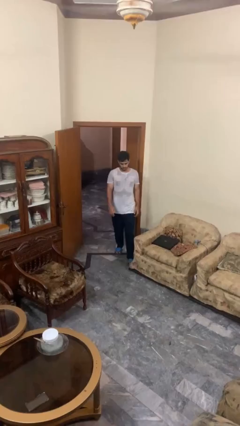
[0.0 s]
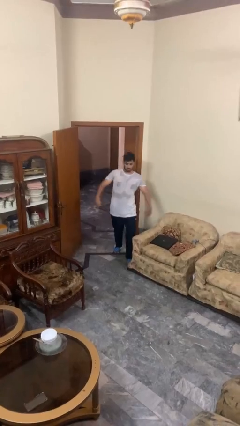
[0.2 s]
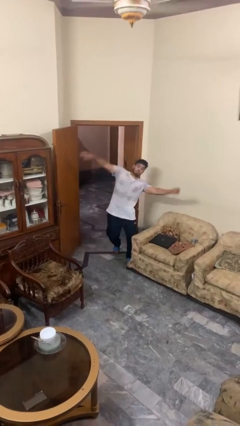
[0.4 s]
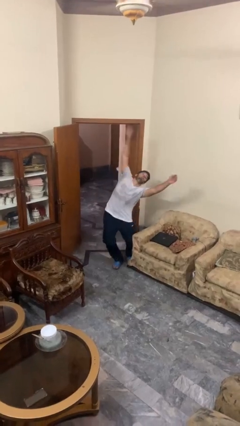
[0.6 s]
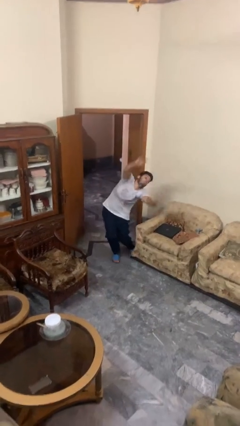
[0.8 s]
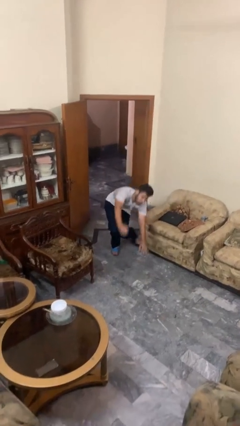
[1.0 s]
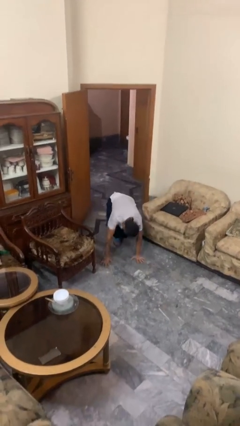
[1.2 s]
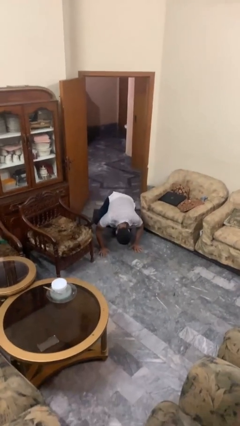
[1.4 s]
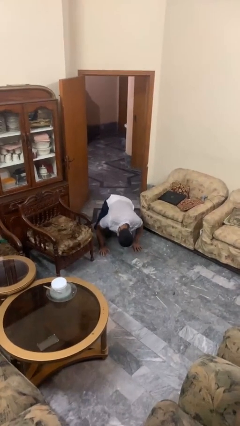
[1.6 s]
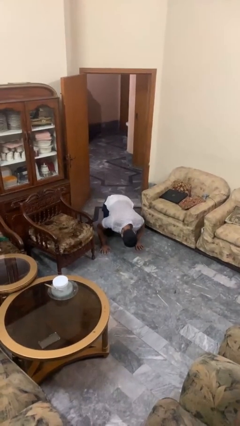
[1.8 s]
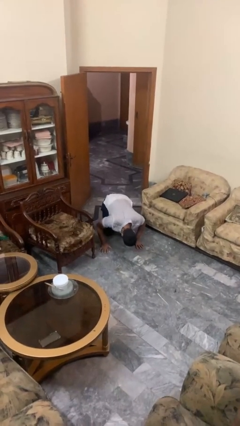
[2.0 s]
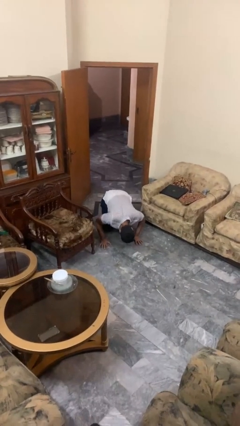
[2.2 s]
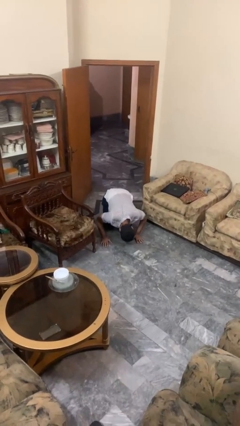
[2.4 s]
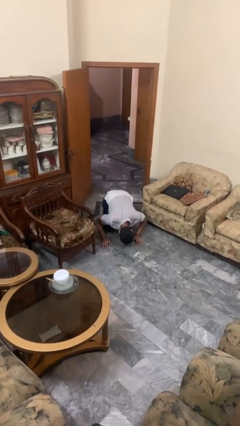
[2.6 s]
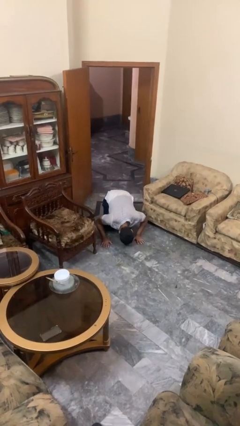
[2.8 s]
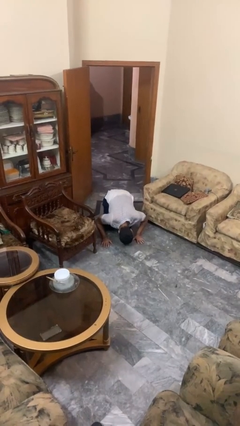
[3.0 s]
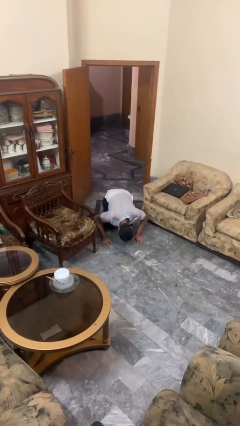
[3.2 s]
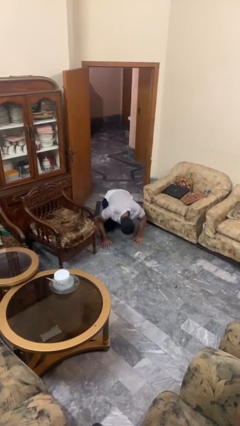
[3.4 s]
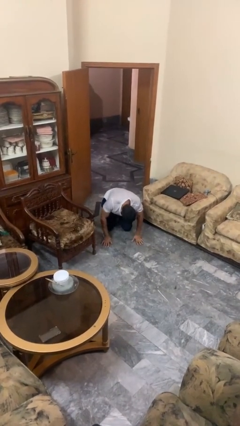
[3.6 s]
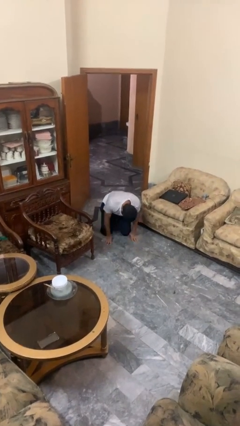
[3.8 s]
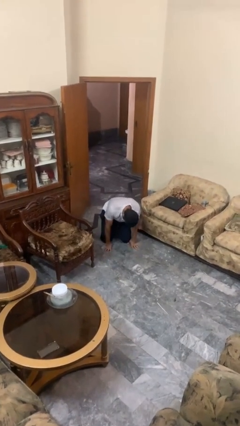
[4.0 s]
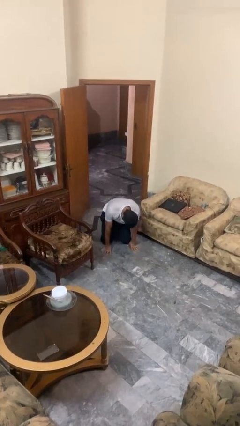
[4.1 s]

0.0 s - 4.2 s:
person trips on object on floor

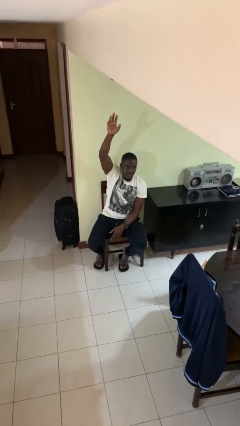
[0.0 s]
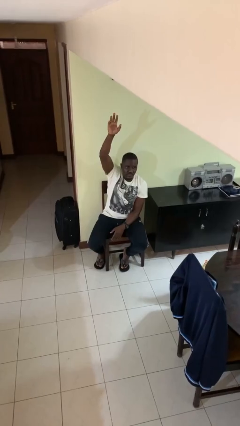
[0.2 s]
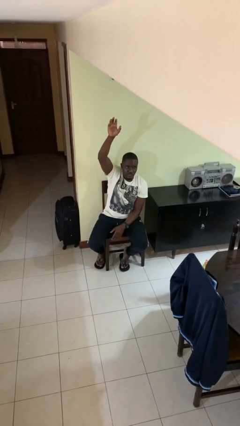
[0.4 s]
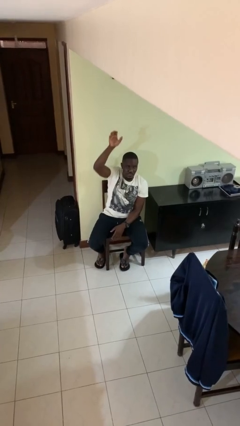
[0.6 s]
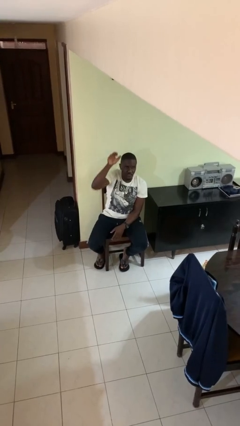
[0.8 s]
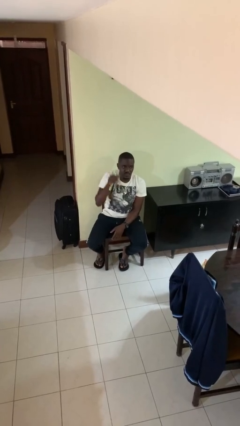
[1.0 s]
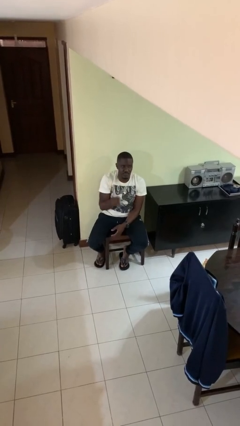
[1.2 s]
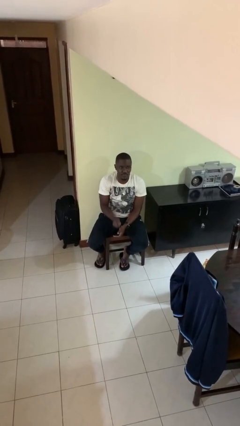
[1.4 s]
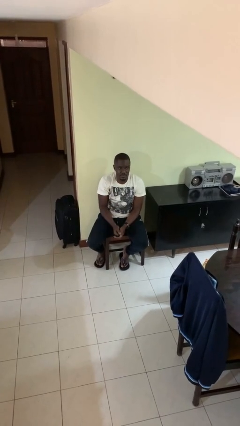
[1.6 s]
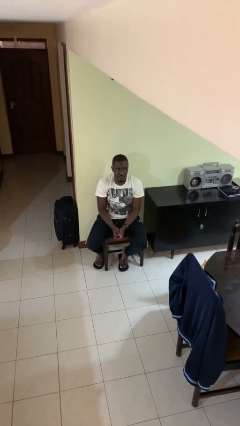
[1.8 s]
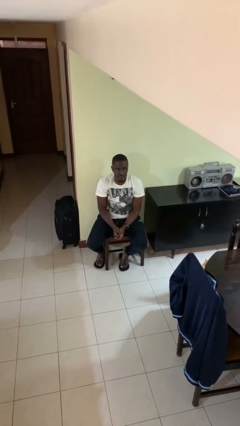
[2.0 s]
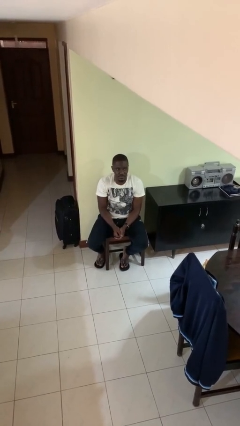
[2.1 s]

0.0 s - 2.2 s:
person gestures lower hand

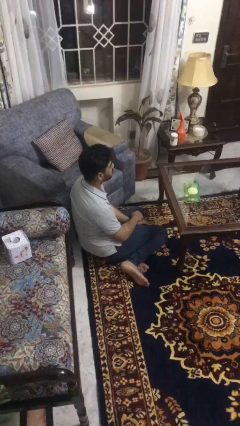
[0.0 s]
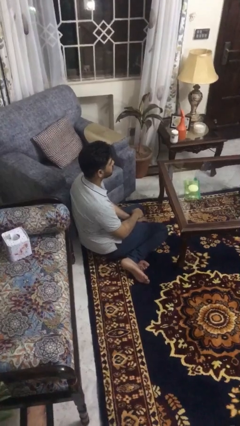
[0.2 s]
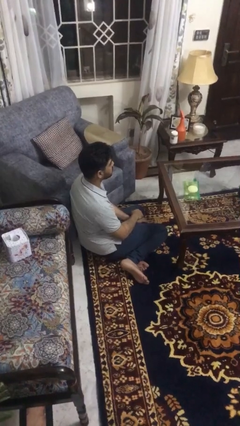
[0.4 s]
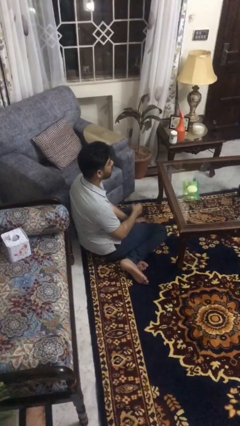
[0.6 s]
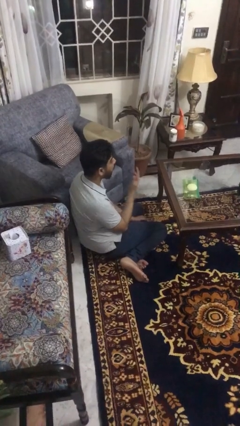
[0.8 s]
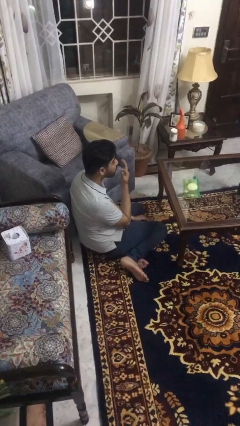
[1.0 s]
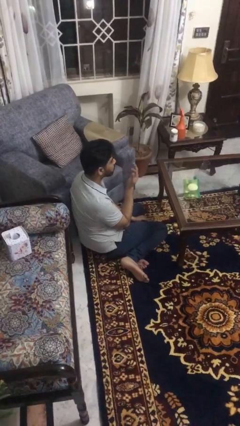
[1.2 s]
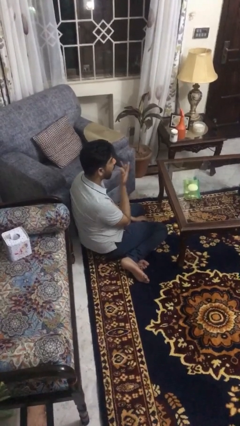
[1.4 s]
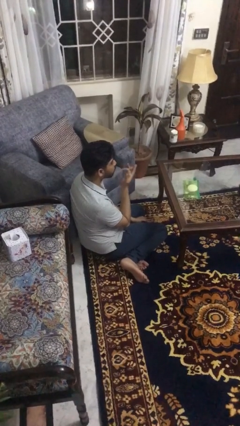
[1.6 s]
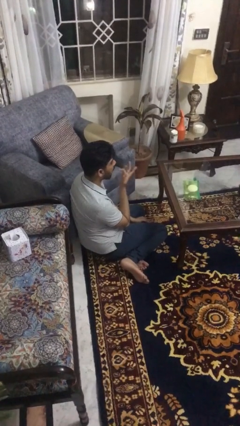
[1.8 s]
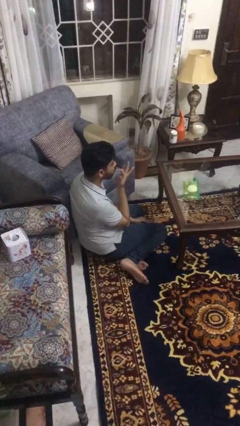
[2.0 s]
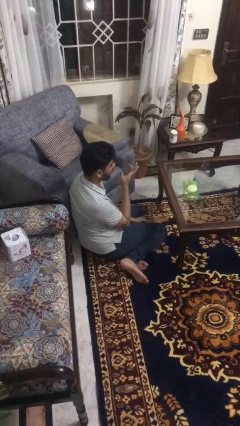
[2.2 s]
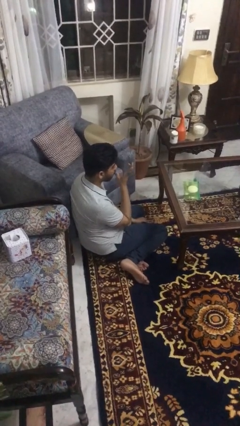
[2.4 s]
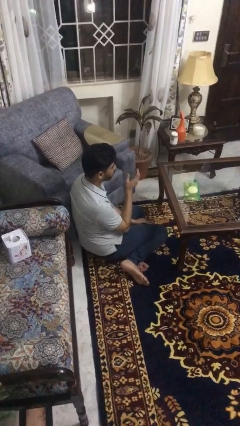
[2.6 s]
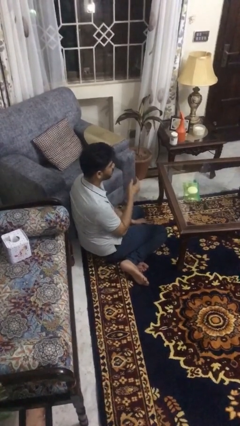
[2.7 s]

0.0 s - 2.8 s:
person licks fingers

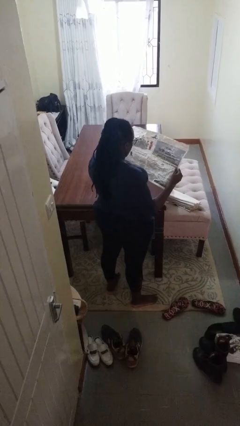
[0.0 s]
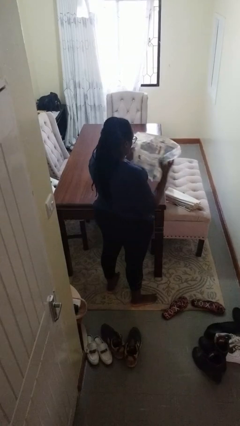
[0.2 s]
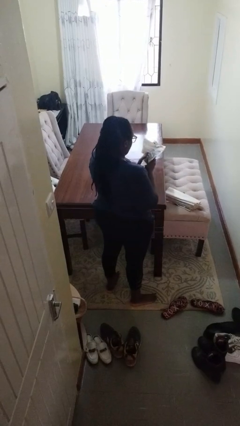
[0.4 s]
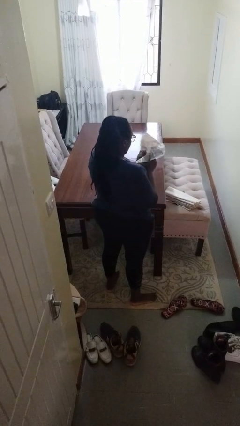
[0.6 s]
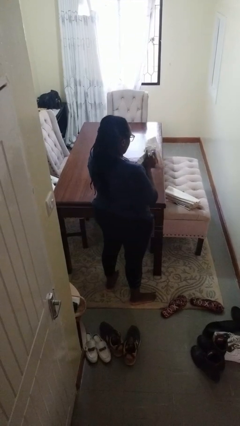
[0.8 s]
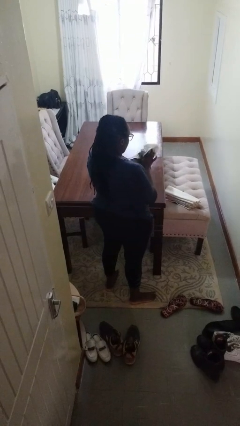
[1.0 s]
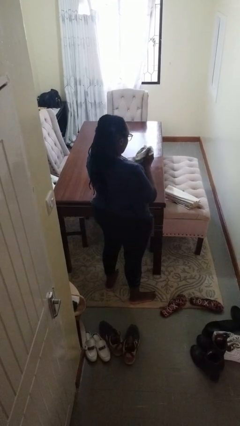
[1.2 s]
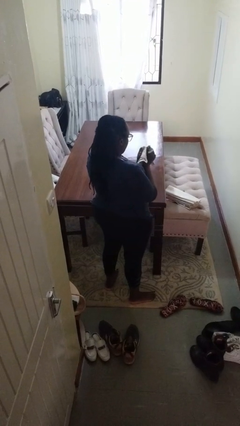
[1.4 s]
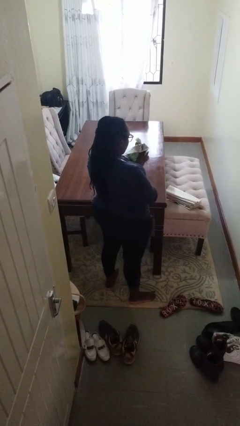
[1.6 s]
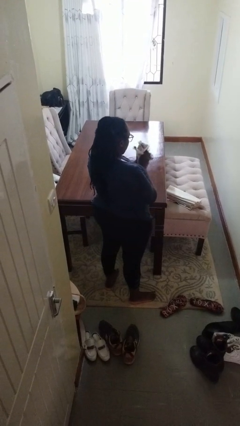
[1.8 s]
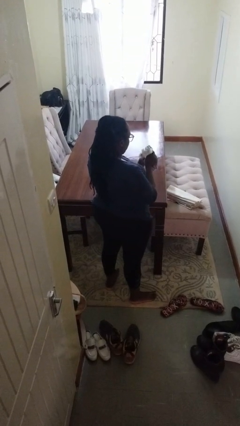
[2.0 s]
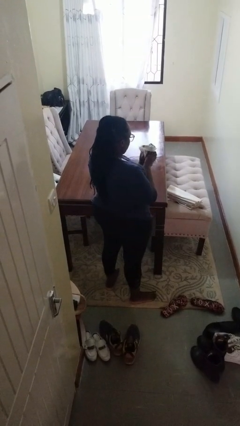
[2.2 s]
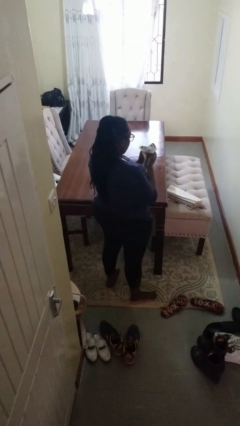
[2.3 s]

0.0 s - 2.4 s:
person crumples paper

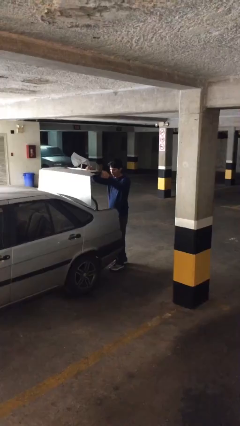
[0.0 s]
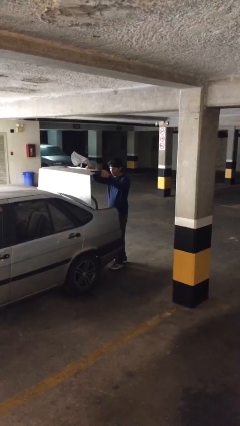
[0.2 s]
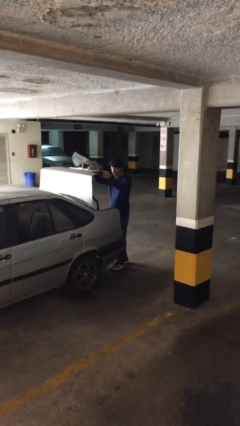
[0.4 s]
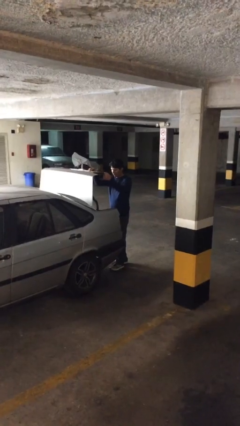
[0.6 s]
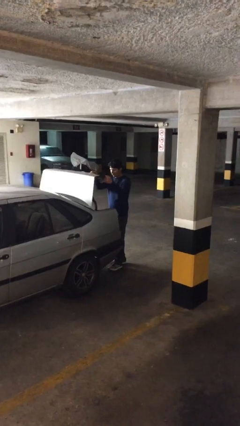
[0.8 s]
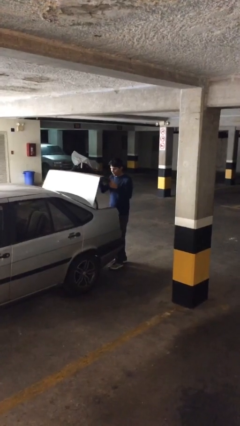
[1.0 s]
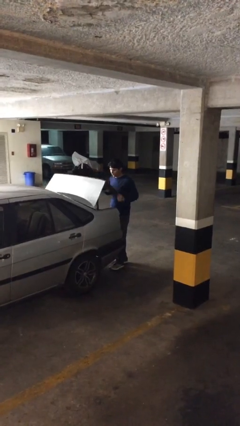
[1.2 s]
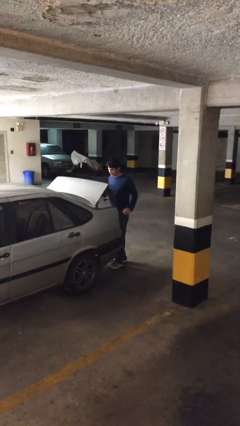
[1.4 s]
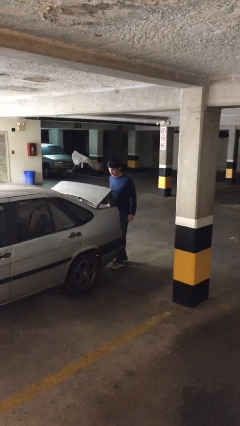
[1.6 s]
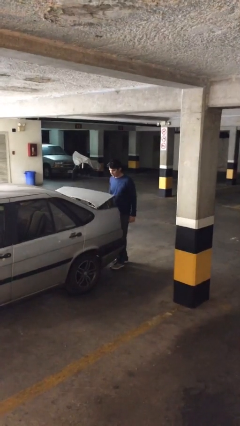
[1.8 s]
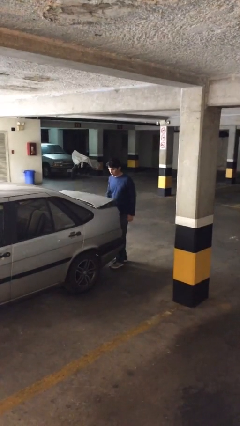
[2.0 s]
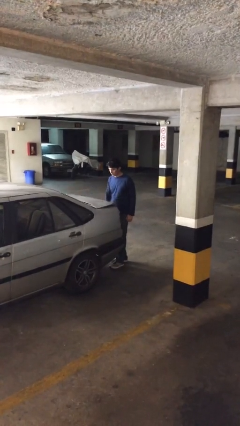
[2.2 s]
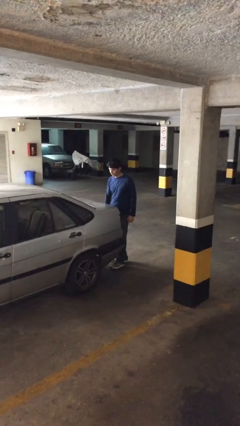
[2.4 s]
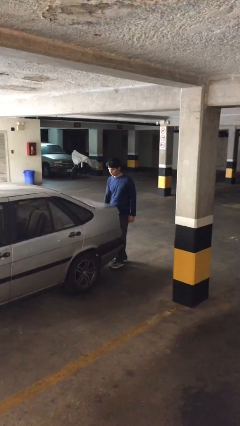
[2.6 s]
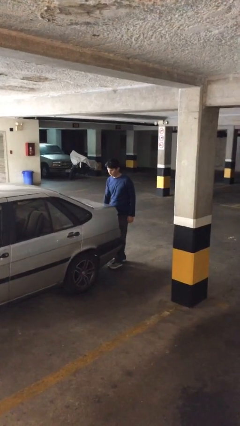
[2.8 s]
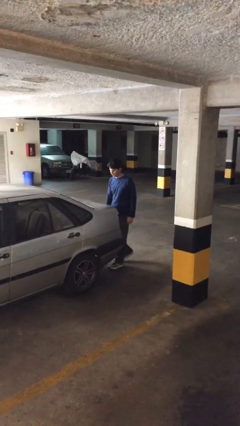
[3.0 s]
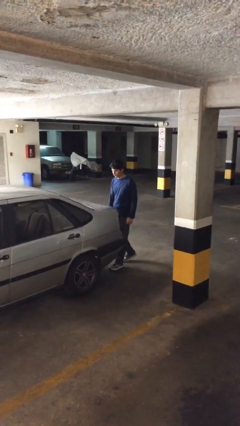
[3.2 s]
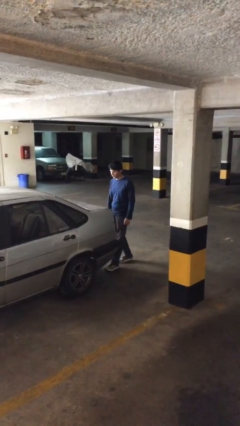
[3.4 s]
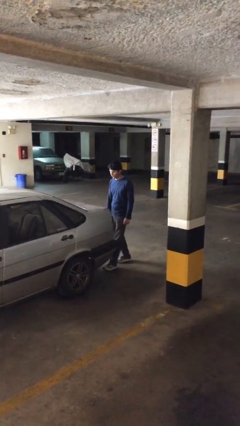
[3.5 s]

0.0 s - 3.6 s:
person closes car trunk

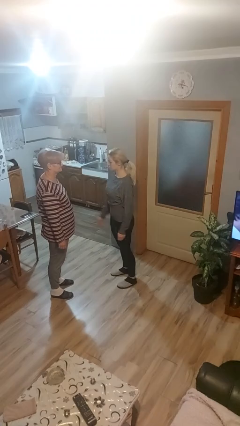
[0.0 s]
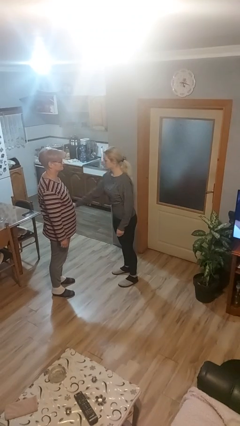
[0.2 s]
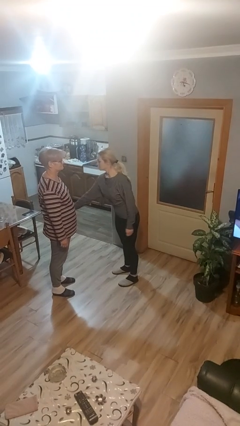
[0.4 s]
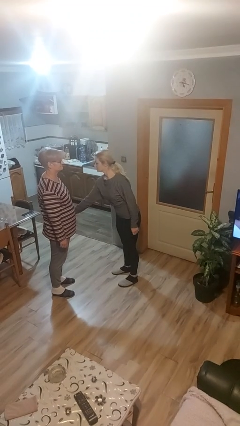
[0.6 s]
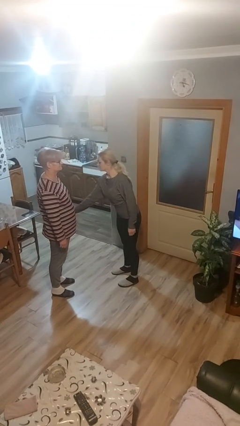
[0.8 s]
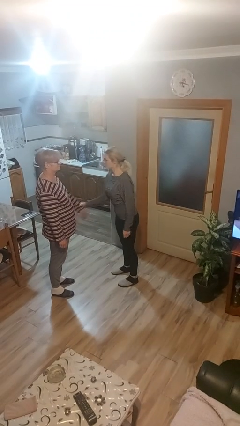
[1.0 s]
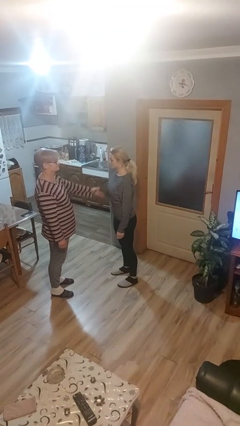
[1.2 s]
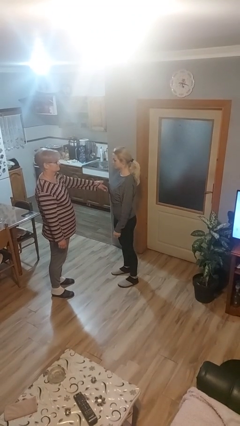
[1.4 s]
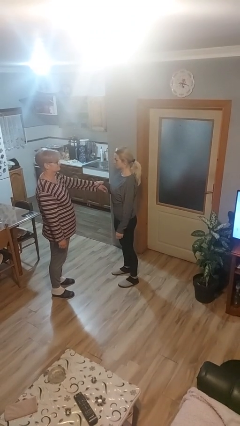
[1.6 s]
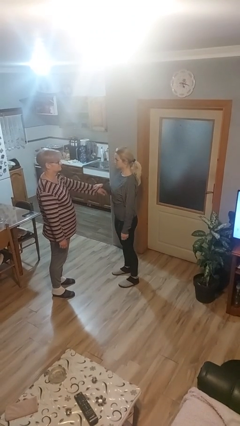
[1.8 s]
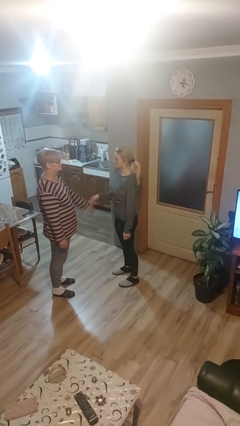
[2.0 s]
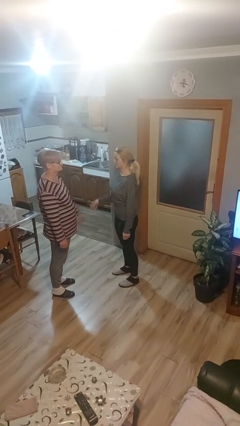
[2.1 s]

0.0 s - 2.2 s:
person grabs person by forearm

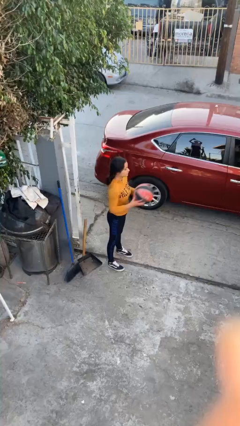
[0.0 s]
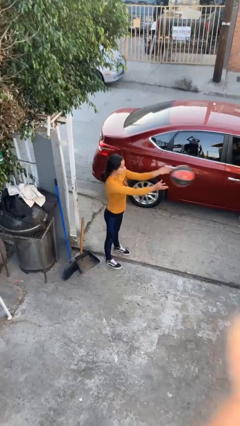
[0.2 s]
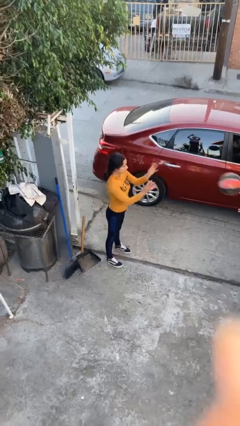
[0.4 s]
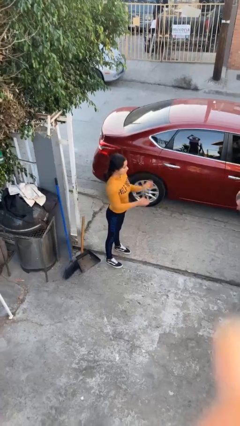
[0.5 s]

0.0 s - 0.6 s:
person throws object to person
